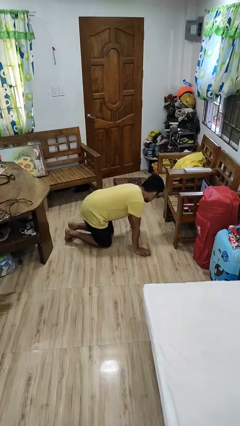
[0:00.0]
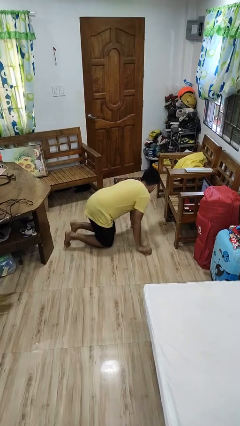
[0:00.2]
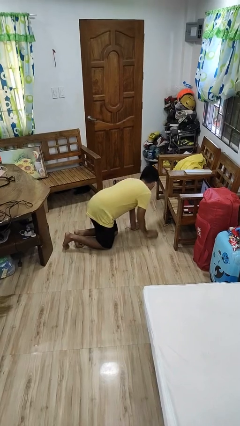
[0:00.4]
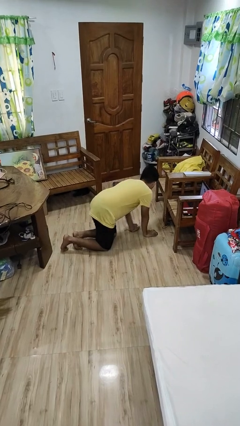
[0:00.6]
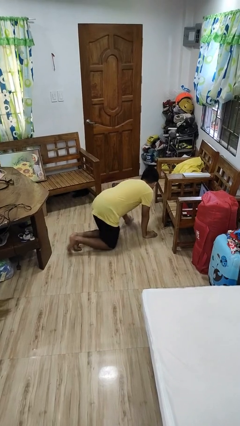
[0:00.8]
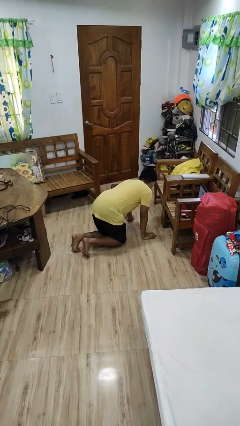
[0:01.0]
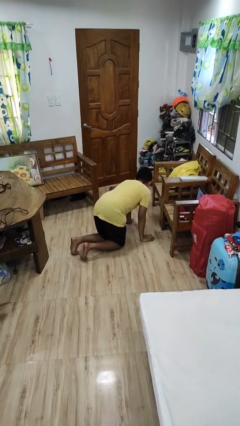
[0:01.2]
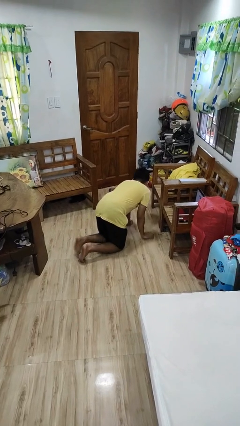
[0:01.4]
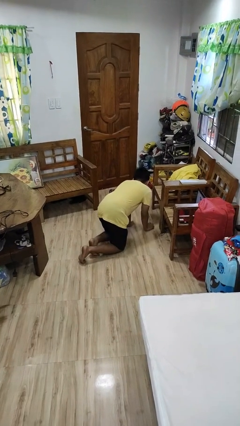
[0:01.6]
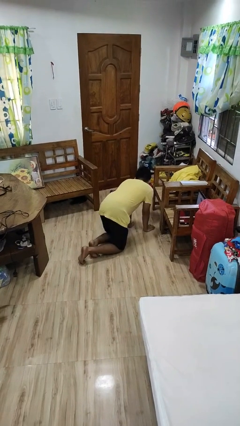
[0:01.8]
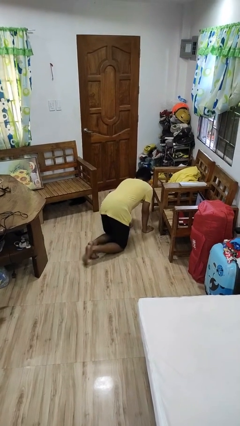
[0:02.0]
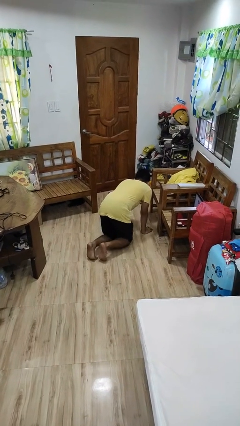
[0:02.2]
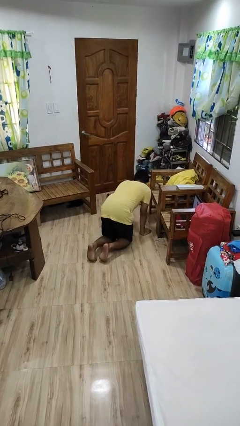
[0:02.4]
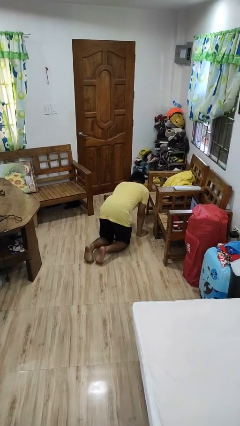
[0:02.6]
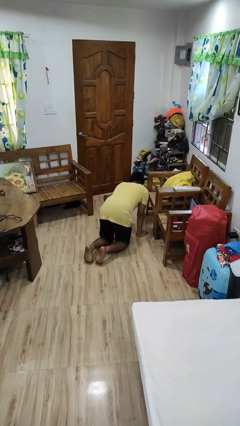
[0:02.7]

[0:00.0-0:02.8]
person crawls

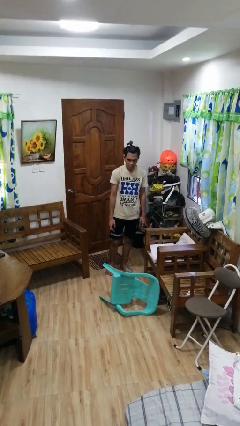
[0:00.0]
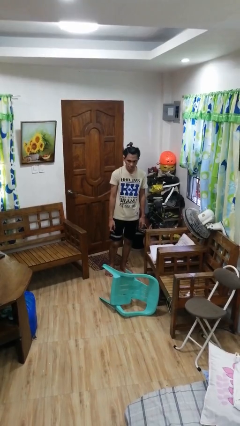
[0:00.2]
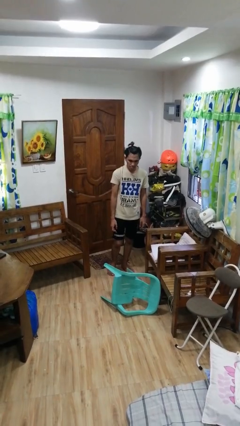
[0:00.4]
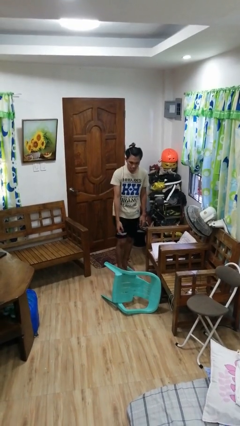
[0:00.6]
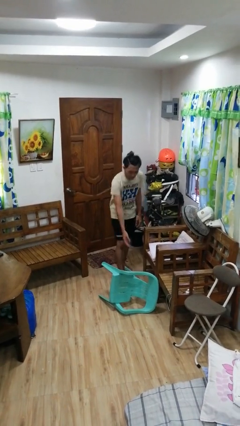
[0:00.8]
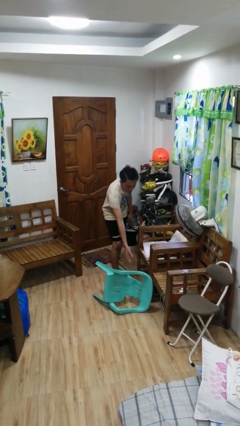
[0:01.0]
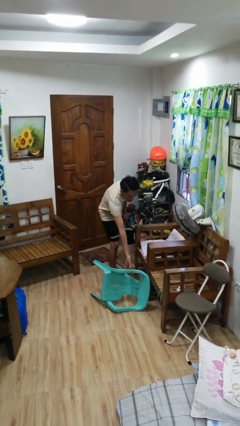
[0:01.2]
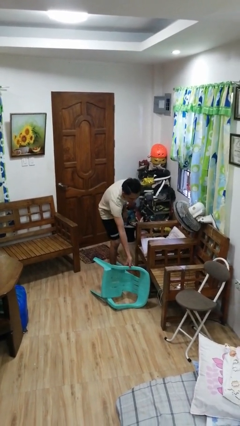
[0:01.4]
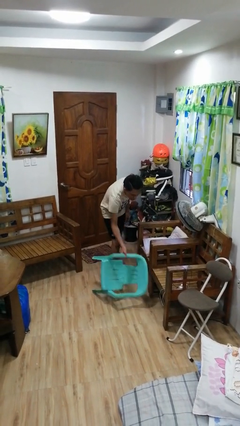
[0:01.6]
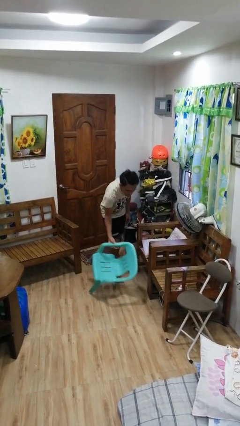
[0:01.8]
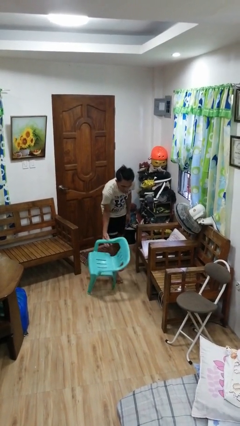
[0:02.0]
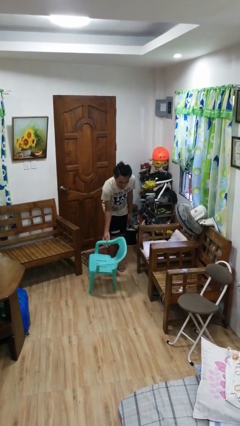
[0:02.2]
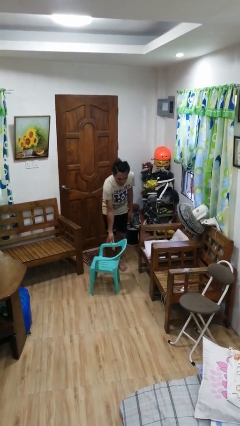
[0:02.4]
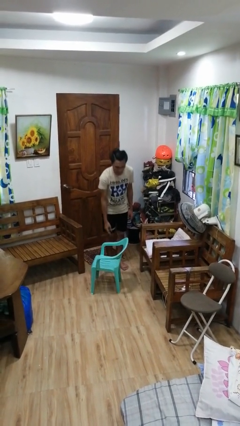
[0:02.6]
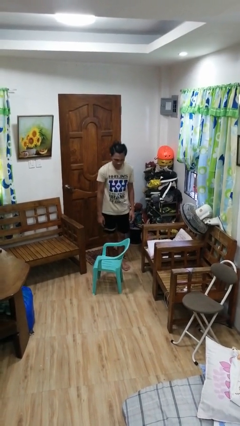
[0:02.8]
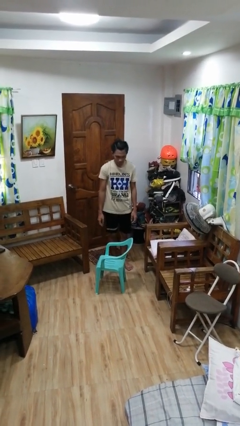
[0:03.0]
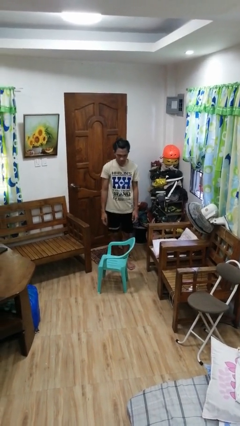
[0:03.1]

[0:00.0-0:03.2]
person sets upright furniture

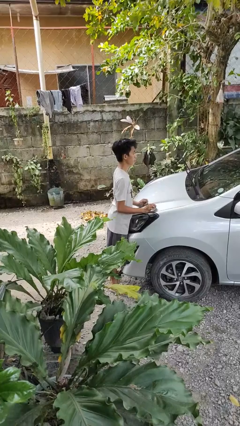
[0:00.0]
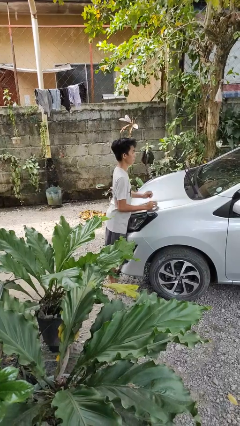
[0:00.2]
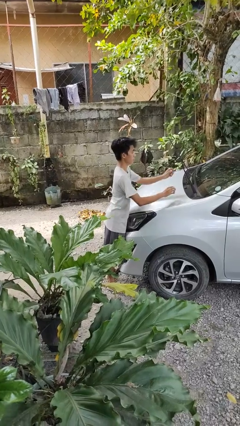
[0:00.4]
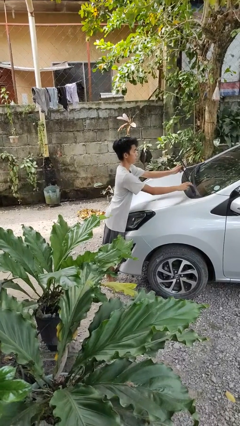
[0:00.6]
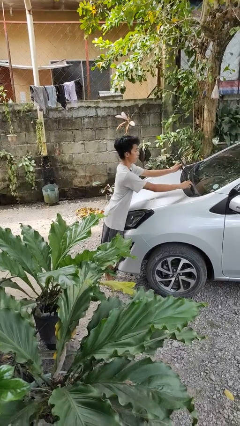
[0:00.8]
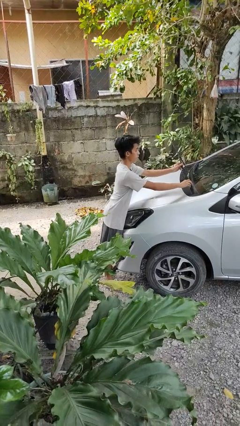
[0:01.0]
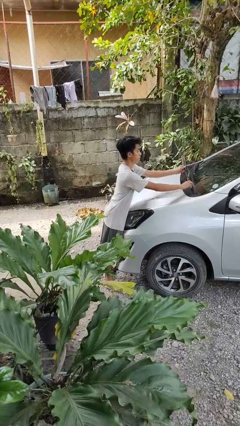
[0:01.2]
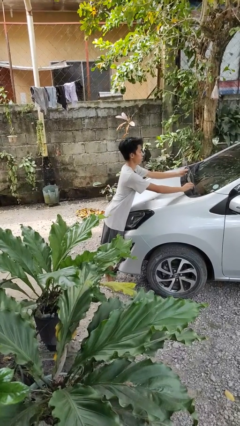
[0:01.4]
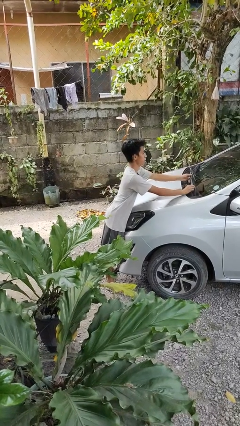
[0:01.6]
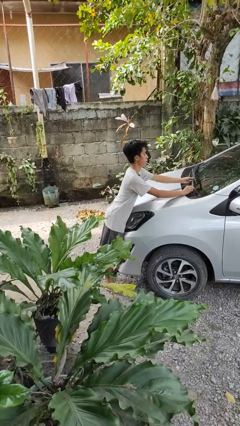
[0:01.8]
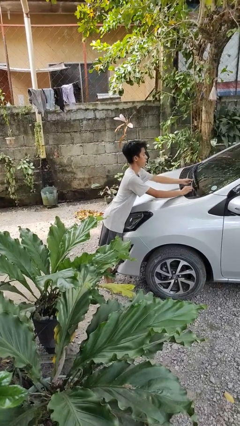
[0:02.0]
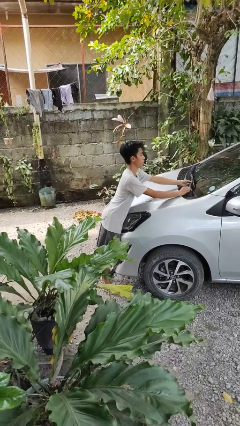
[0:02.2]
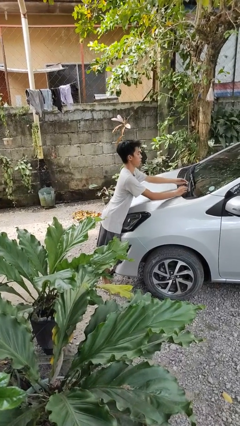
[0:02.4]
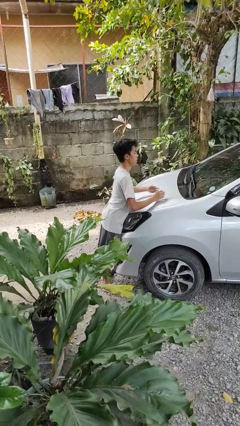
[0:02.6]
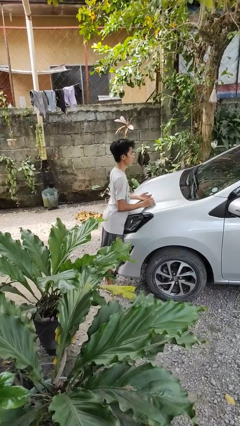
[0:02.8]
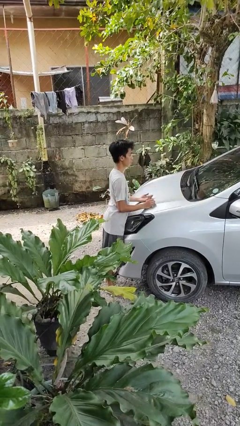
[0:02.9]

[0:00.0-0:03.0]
person flips down car wipers

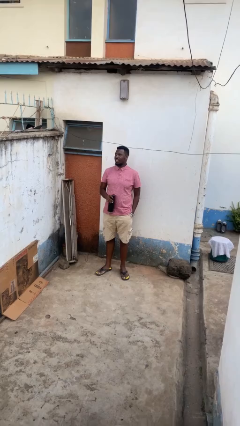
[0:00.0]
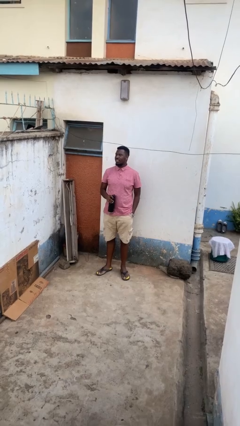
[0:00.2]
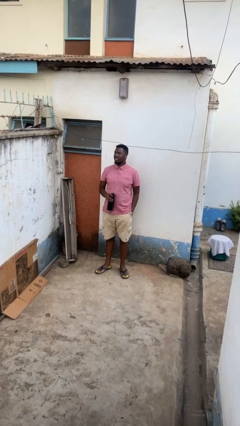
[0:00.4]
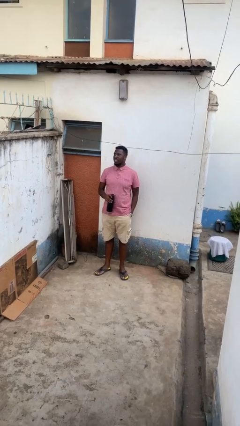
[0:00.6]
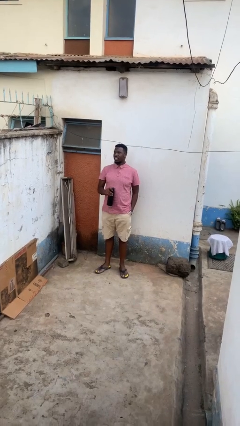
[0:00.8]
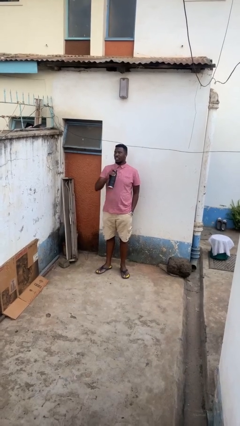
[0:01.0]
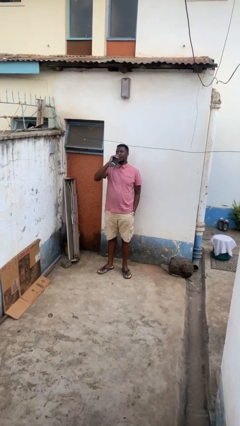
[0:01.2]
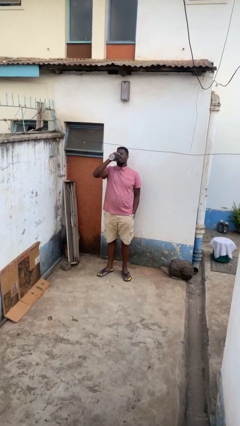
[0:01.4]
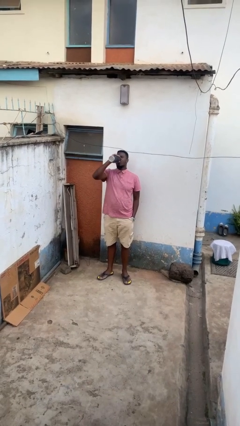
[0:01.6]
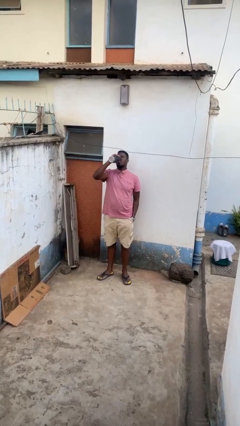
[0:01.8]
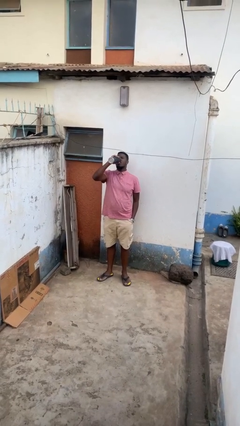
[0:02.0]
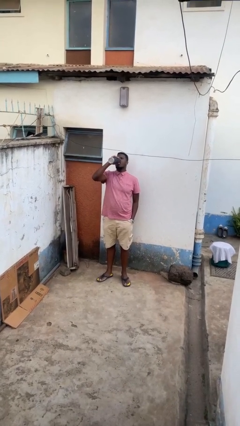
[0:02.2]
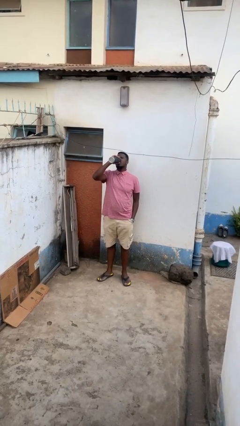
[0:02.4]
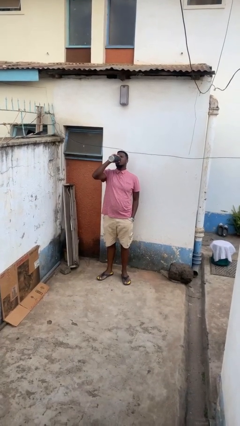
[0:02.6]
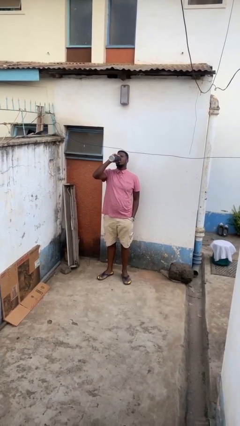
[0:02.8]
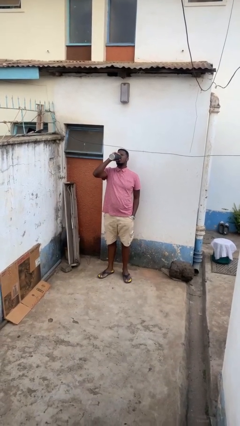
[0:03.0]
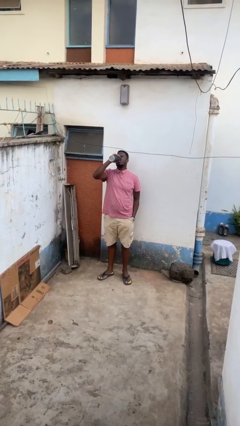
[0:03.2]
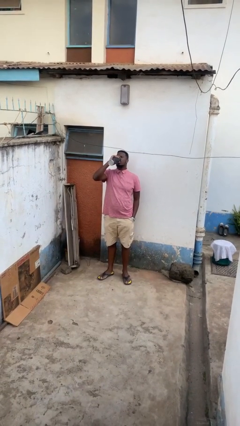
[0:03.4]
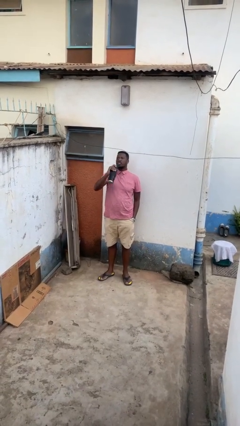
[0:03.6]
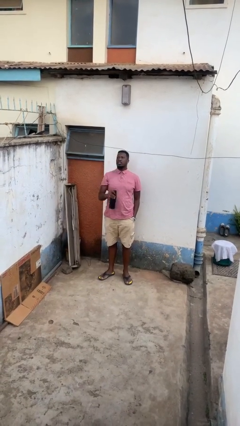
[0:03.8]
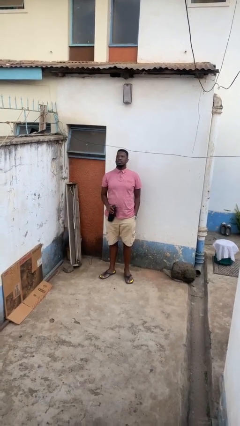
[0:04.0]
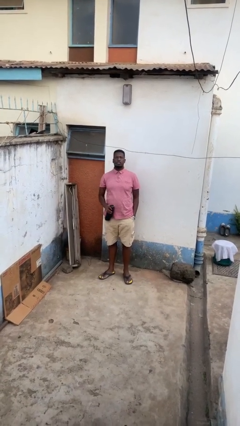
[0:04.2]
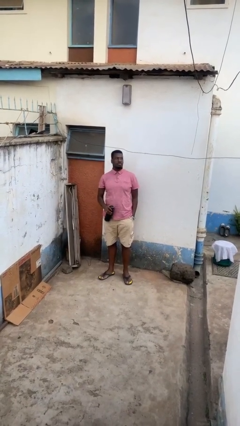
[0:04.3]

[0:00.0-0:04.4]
person drinks from bottle

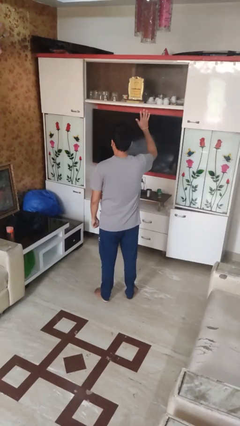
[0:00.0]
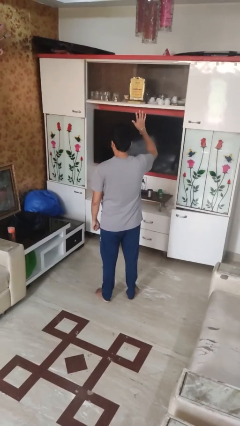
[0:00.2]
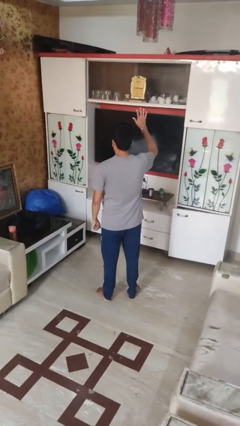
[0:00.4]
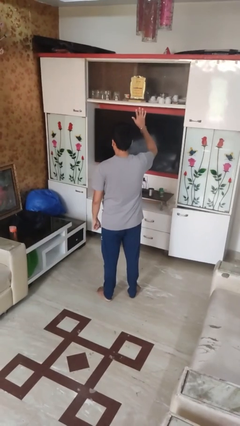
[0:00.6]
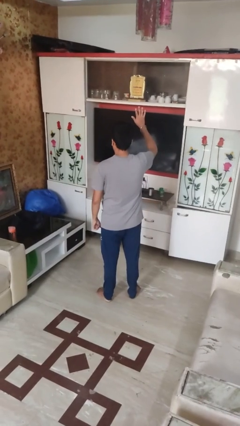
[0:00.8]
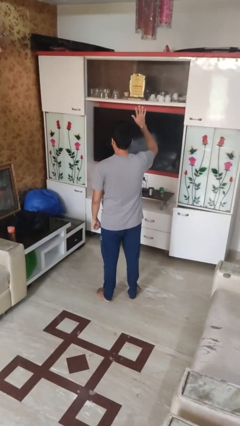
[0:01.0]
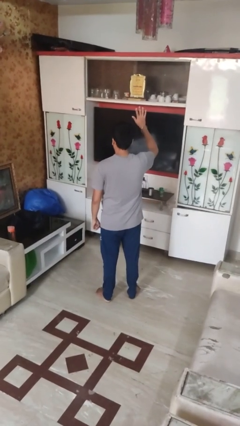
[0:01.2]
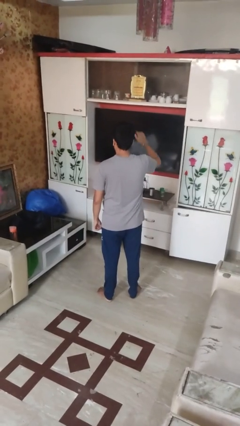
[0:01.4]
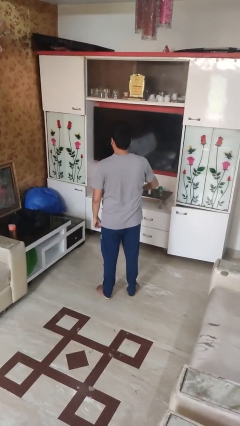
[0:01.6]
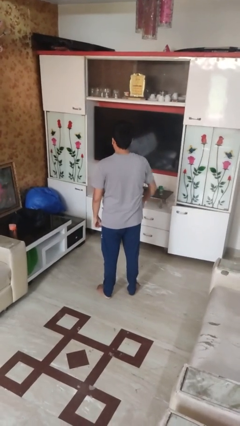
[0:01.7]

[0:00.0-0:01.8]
person gestures number five

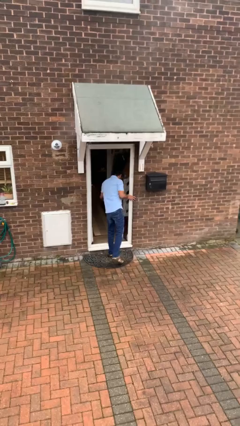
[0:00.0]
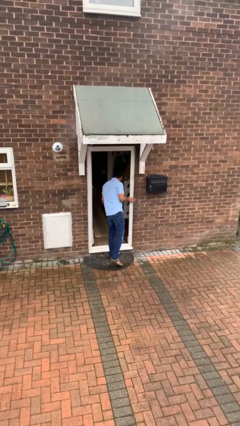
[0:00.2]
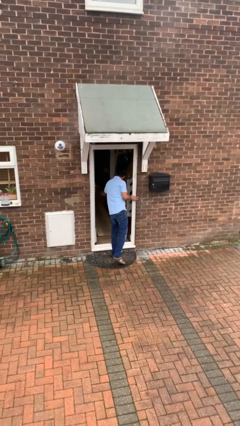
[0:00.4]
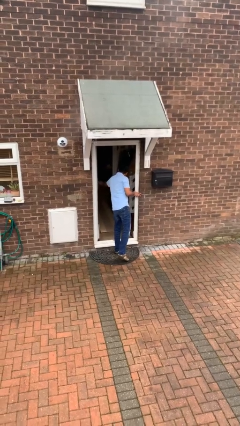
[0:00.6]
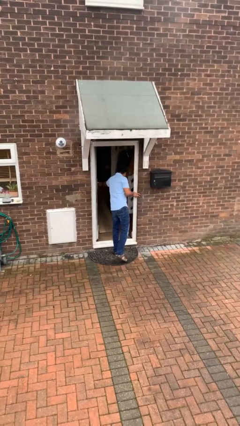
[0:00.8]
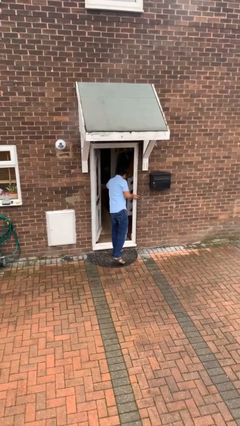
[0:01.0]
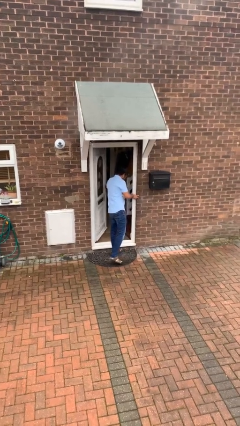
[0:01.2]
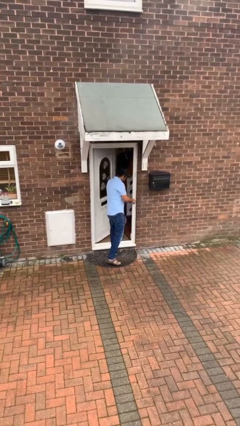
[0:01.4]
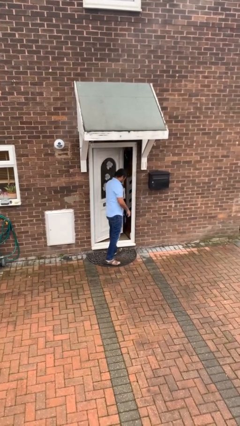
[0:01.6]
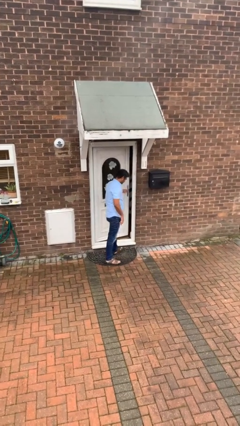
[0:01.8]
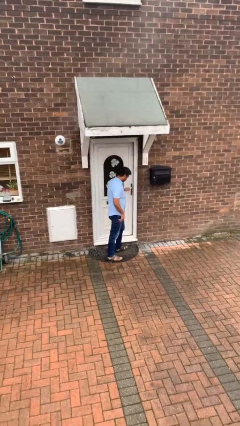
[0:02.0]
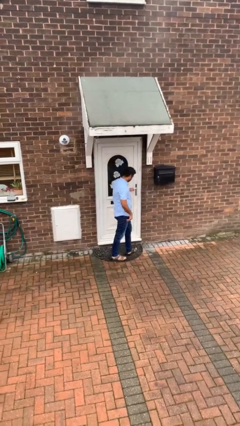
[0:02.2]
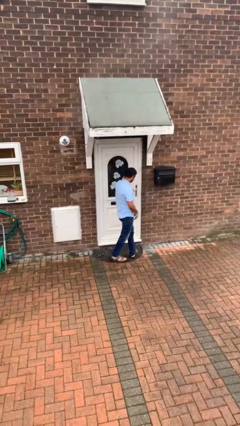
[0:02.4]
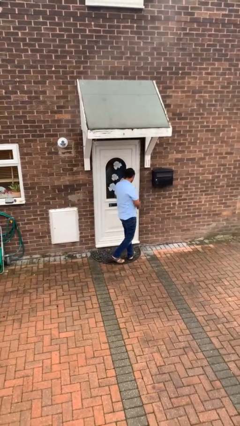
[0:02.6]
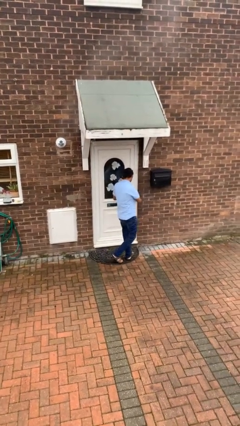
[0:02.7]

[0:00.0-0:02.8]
person closes facility door
